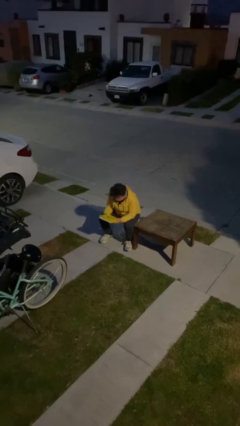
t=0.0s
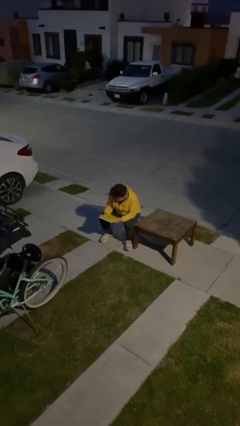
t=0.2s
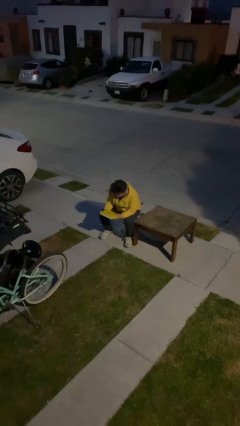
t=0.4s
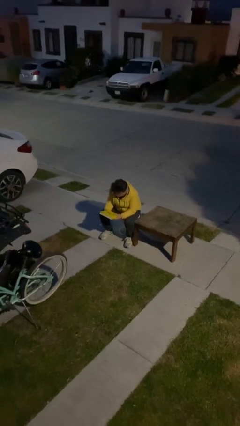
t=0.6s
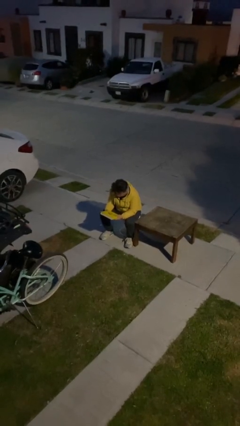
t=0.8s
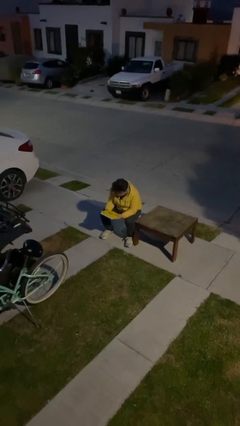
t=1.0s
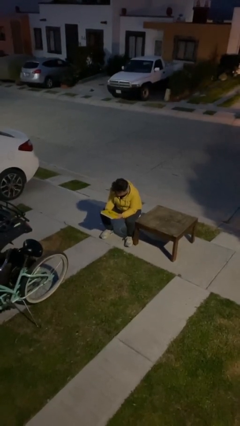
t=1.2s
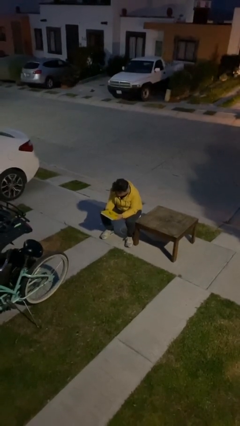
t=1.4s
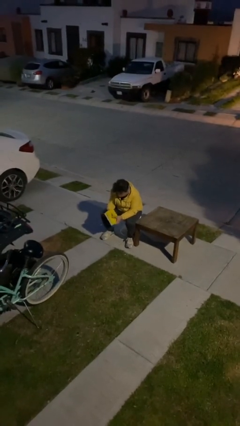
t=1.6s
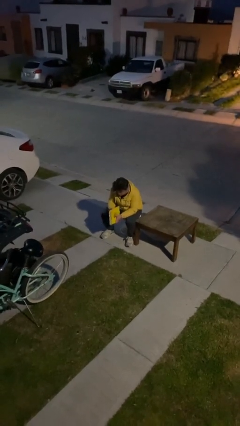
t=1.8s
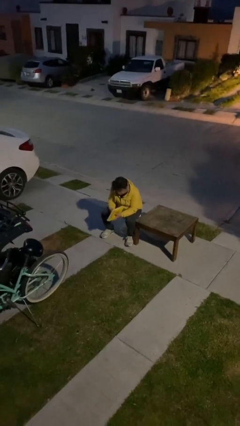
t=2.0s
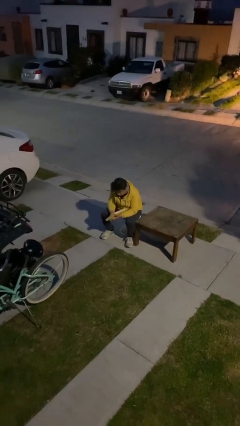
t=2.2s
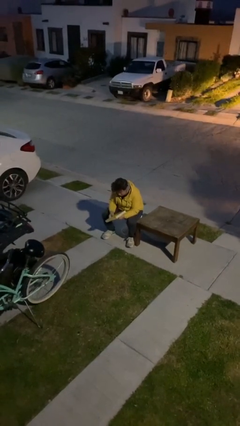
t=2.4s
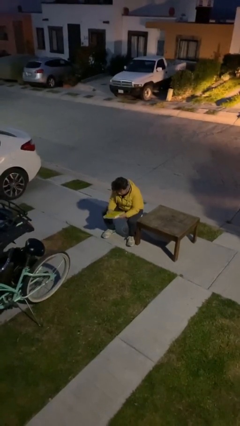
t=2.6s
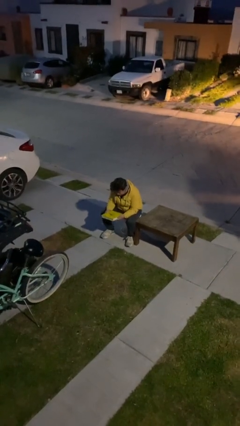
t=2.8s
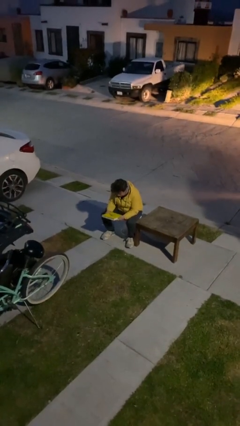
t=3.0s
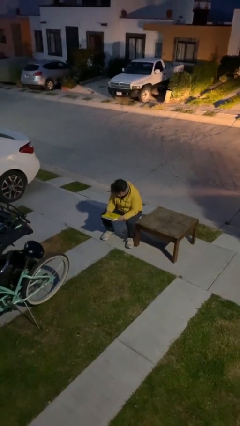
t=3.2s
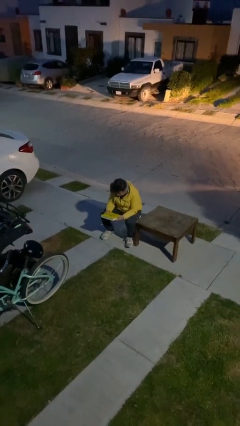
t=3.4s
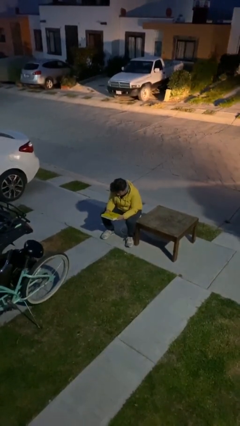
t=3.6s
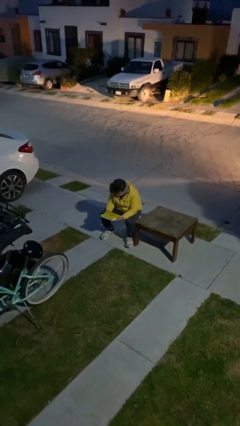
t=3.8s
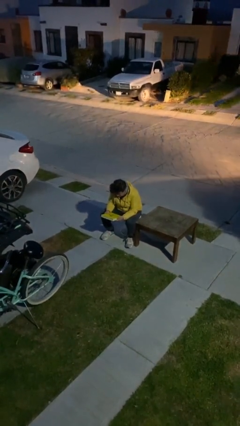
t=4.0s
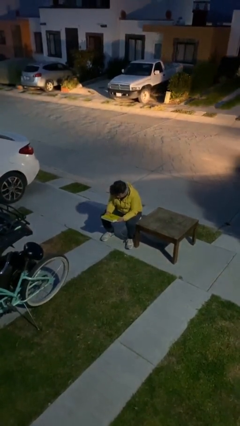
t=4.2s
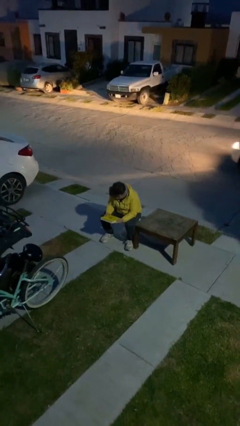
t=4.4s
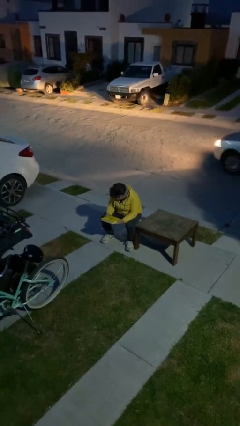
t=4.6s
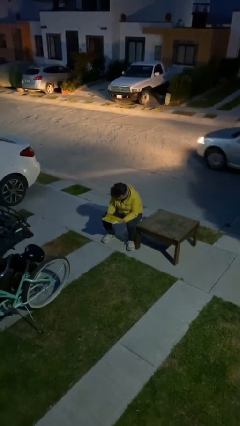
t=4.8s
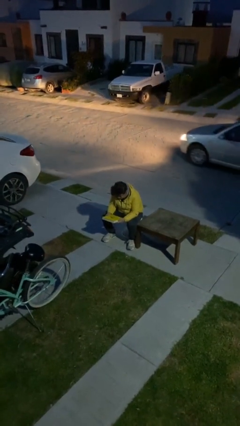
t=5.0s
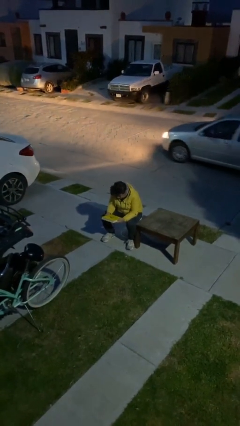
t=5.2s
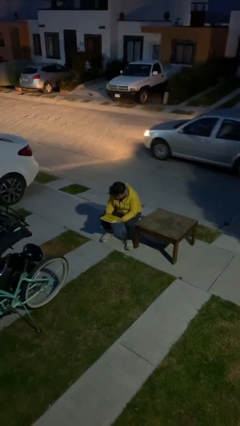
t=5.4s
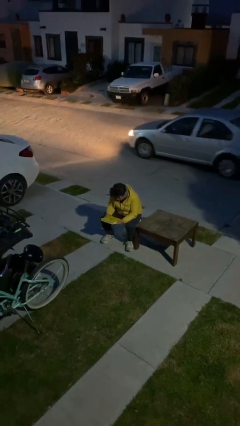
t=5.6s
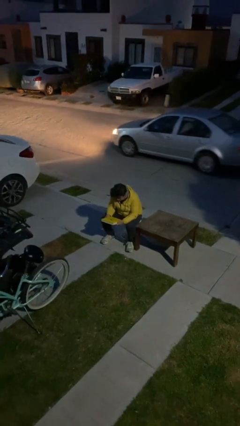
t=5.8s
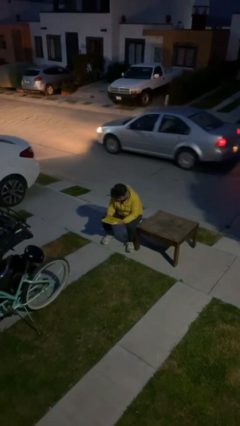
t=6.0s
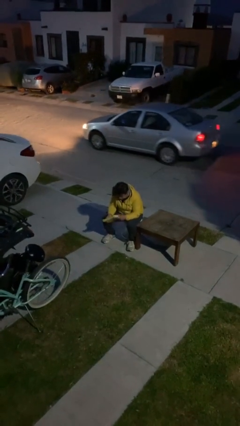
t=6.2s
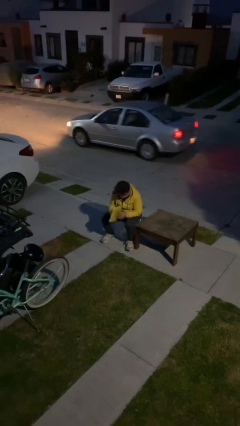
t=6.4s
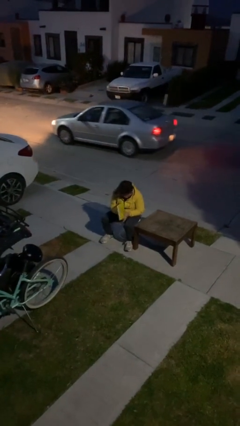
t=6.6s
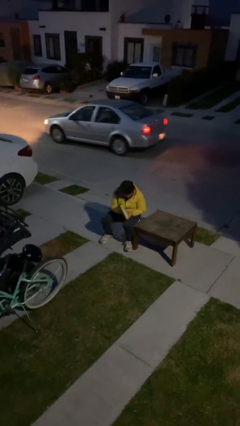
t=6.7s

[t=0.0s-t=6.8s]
person reads document

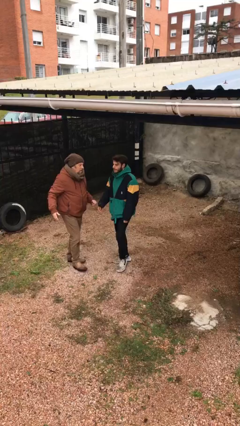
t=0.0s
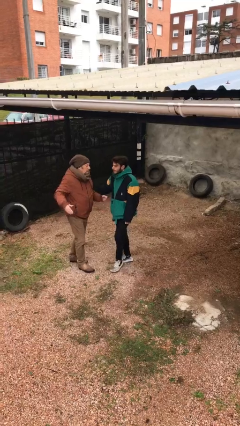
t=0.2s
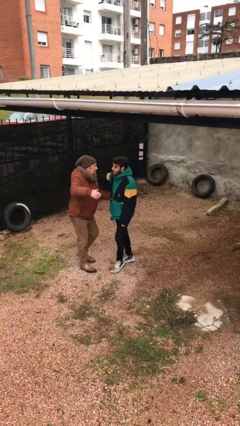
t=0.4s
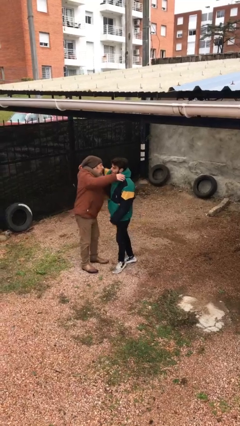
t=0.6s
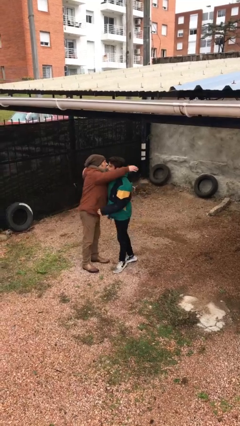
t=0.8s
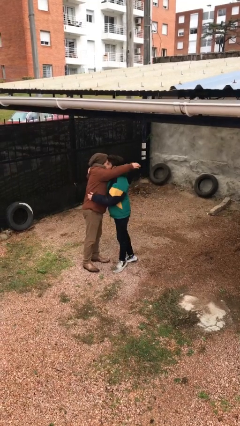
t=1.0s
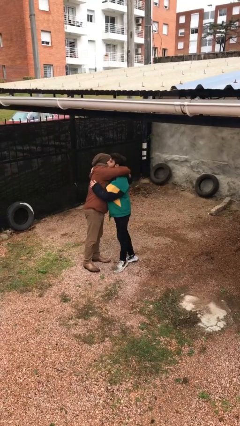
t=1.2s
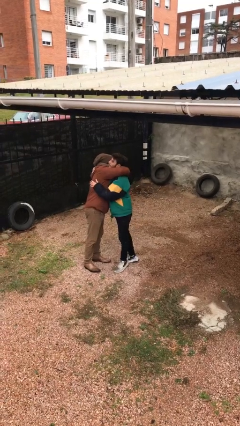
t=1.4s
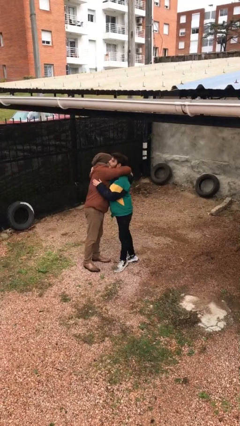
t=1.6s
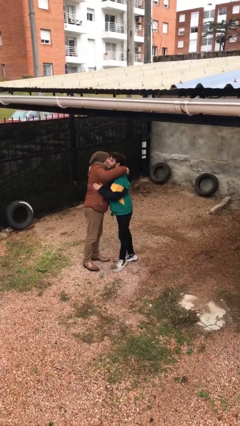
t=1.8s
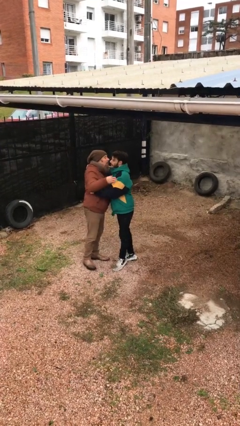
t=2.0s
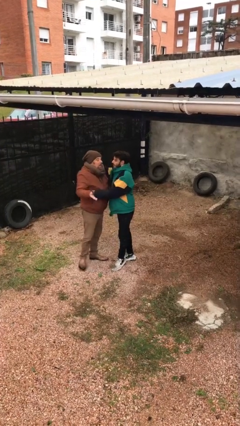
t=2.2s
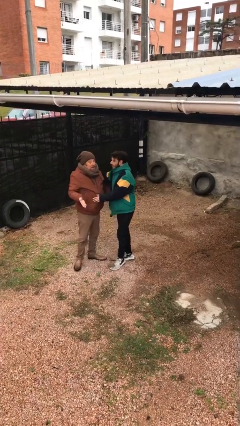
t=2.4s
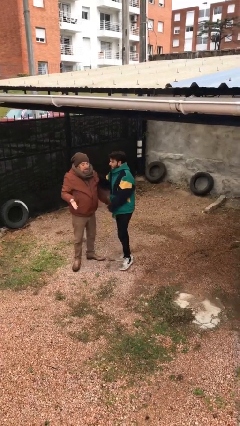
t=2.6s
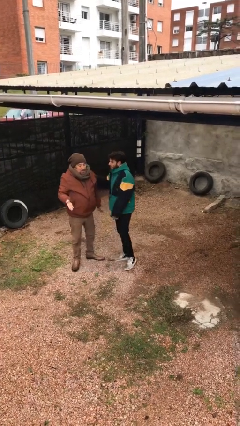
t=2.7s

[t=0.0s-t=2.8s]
person embraces person

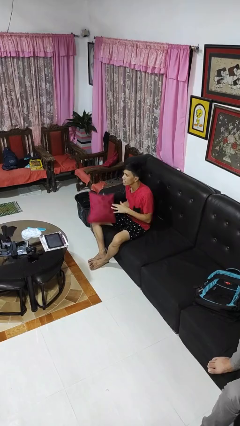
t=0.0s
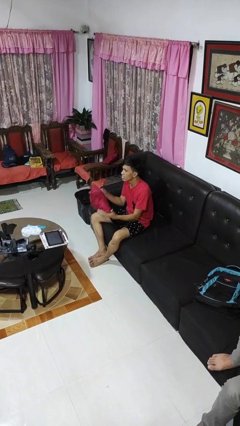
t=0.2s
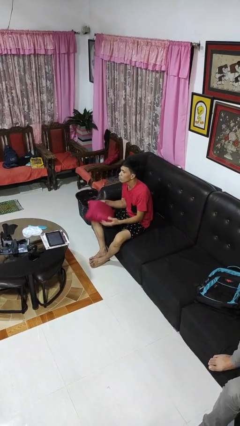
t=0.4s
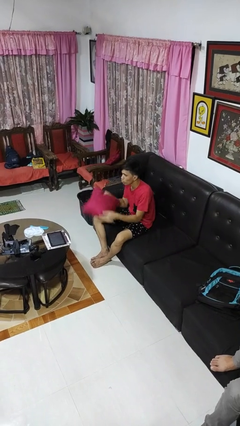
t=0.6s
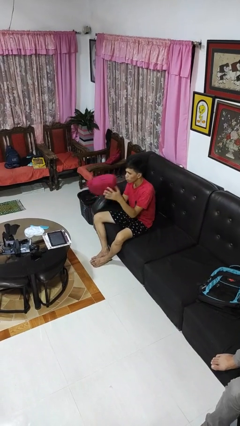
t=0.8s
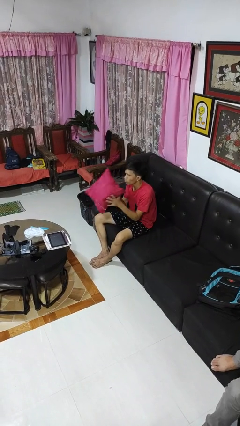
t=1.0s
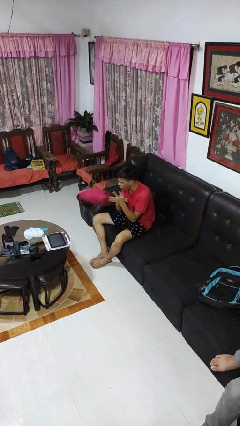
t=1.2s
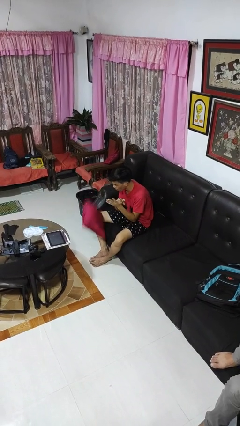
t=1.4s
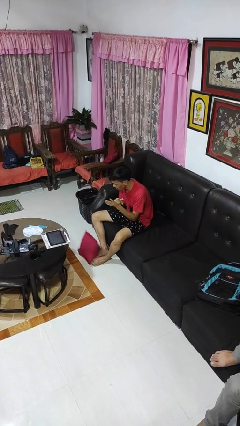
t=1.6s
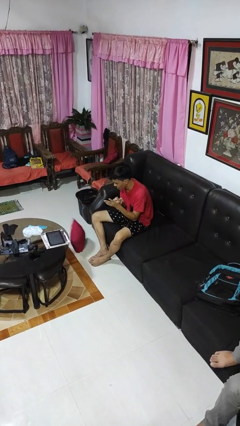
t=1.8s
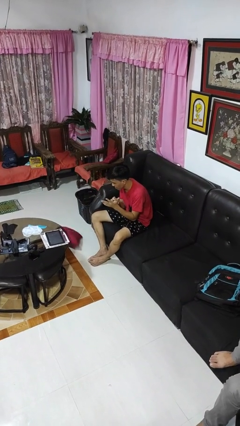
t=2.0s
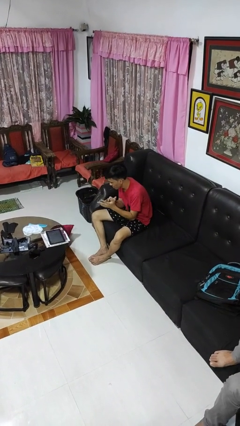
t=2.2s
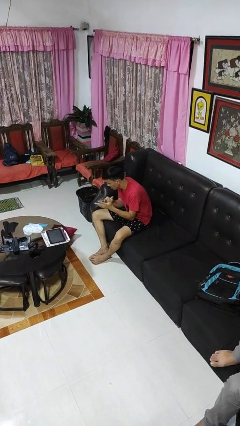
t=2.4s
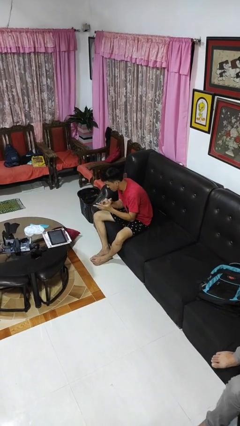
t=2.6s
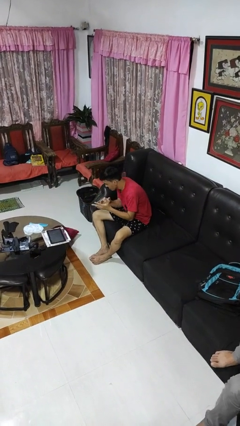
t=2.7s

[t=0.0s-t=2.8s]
person drops object

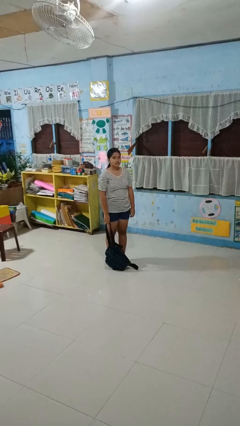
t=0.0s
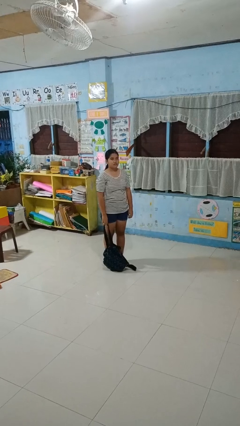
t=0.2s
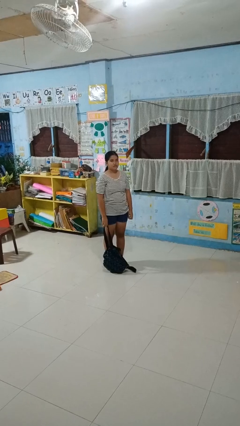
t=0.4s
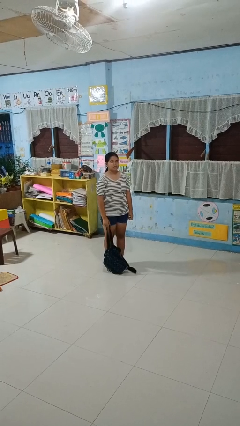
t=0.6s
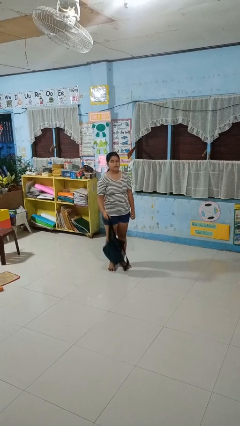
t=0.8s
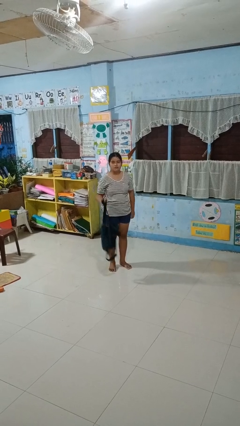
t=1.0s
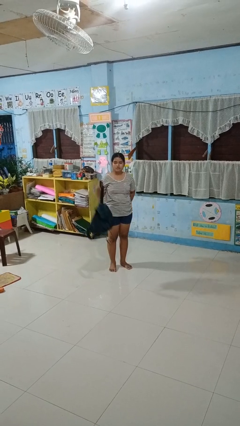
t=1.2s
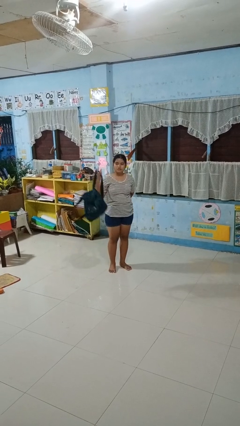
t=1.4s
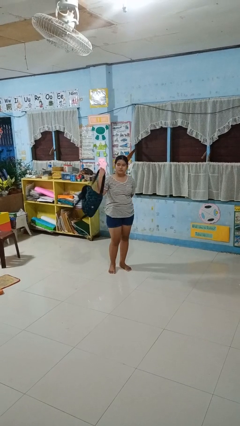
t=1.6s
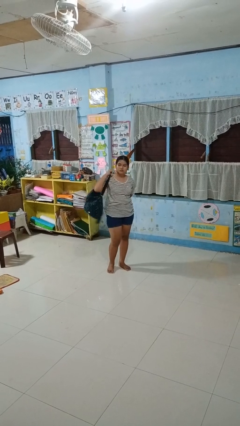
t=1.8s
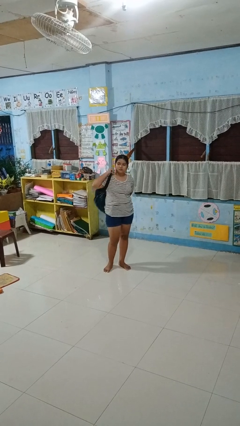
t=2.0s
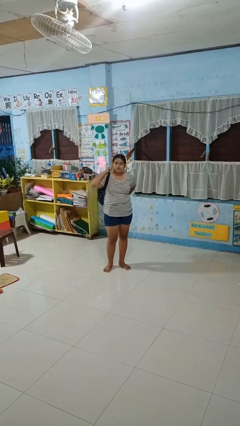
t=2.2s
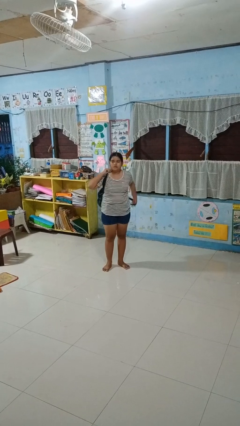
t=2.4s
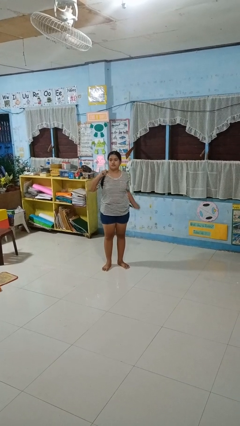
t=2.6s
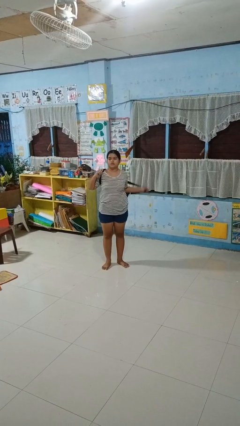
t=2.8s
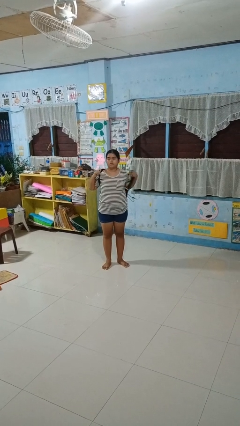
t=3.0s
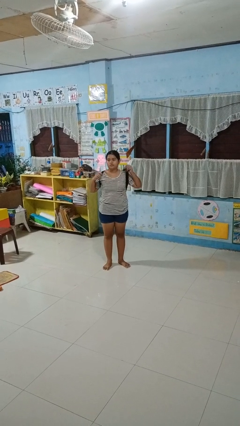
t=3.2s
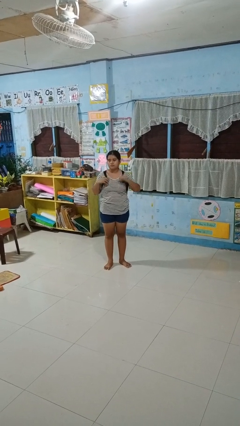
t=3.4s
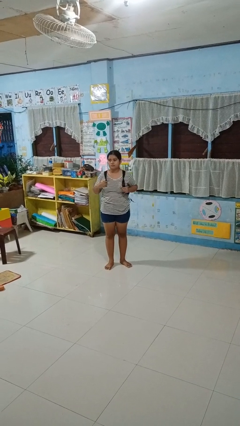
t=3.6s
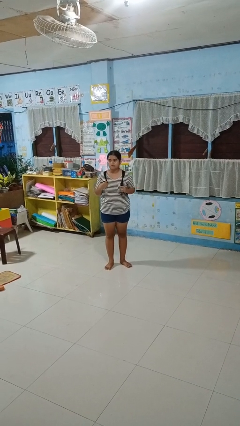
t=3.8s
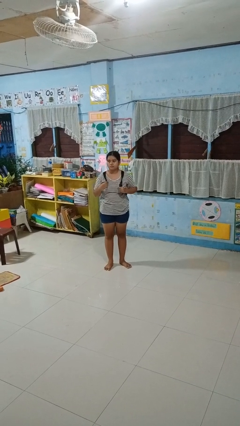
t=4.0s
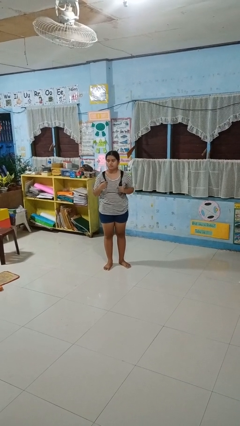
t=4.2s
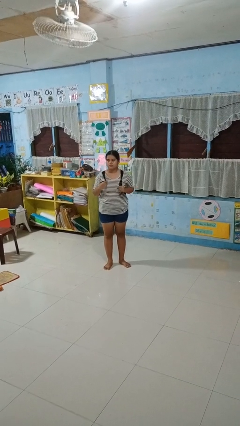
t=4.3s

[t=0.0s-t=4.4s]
person puts on backpack

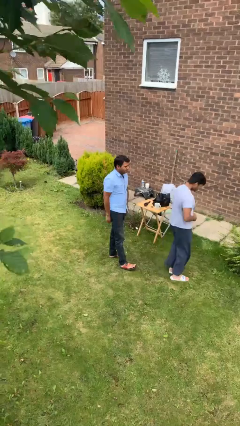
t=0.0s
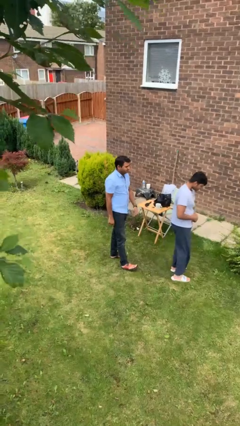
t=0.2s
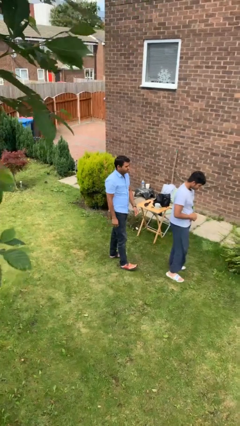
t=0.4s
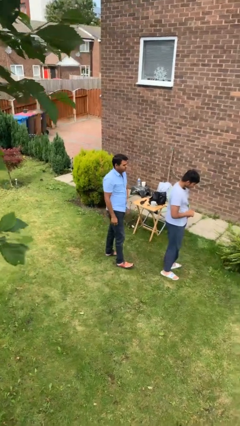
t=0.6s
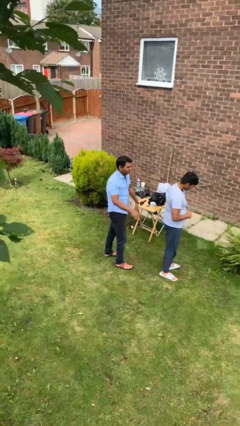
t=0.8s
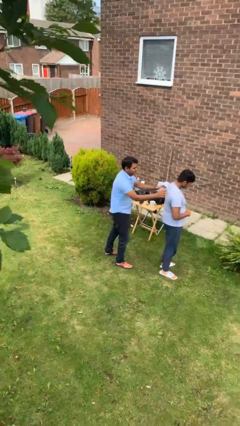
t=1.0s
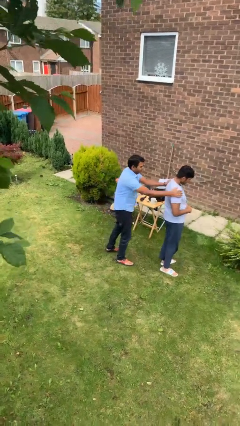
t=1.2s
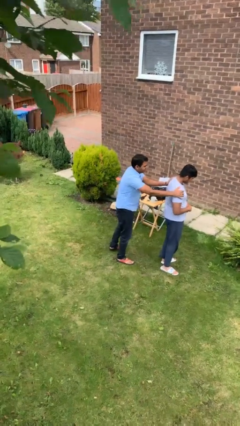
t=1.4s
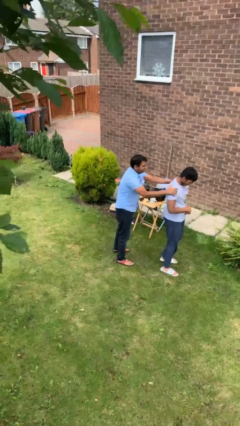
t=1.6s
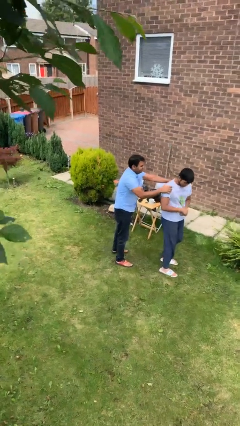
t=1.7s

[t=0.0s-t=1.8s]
person grabs person by shoulder
